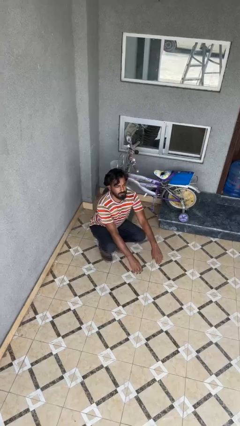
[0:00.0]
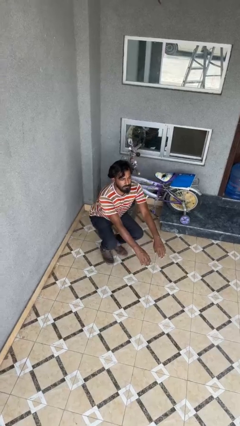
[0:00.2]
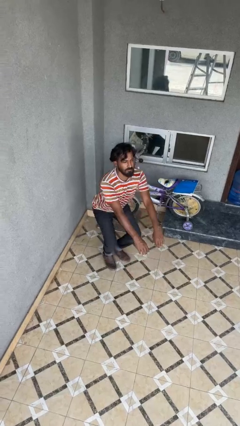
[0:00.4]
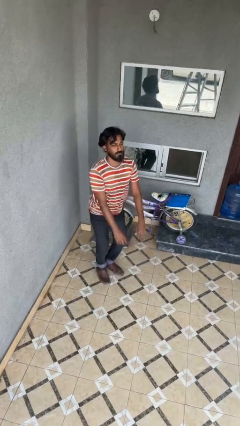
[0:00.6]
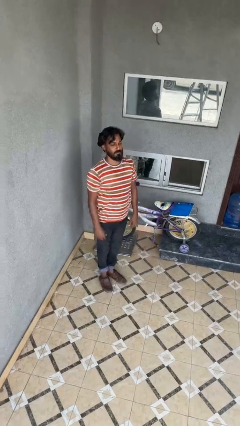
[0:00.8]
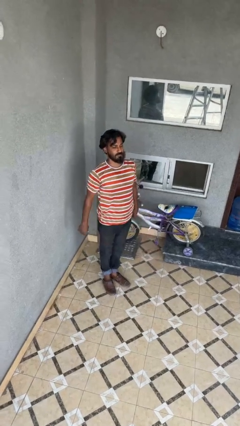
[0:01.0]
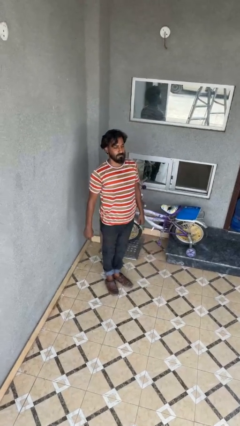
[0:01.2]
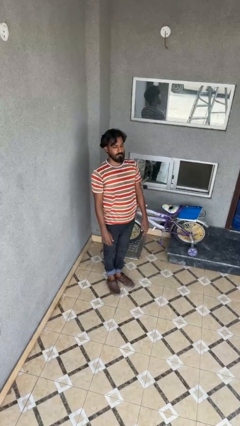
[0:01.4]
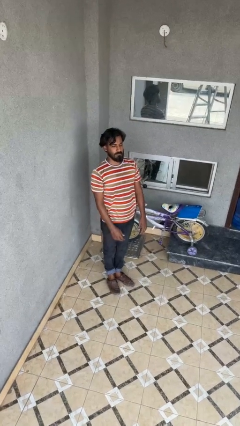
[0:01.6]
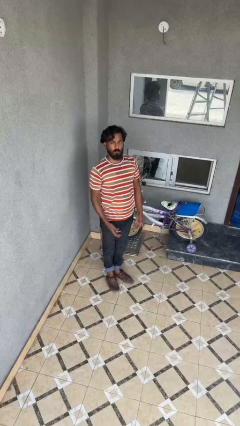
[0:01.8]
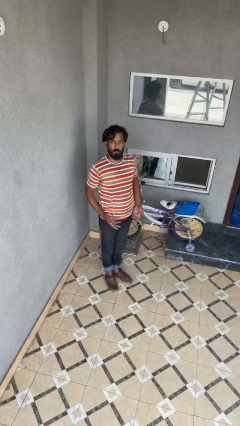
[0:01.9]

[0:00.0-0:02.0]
person stands up

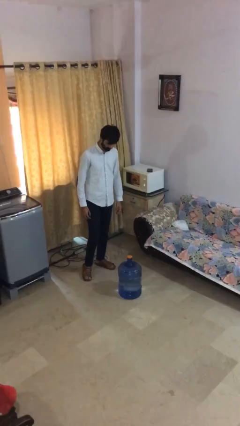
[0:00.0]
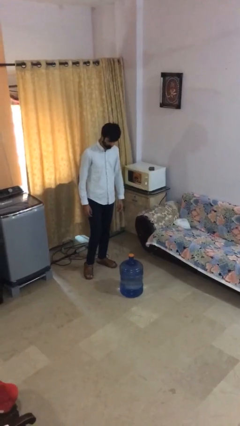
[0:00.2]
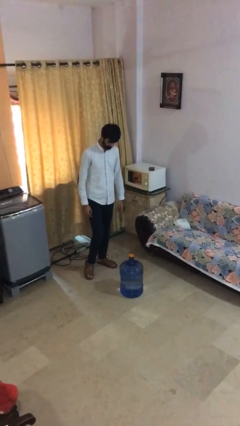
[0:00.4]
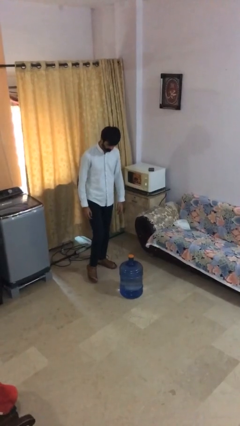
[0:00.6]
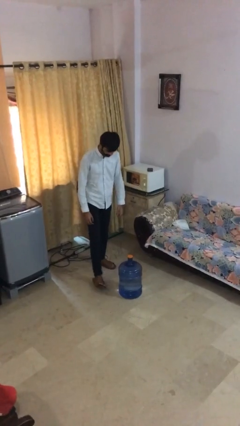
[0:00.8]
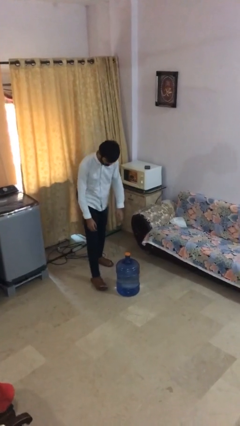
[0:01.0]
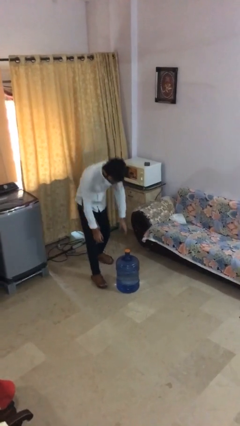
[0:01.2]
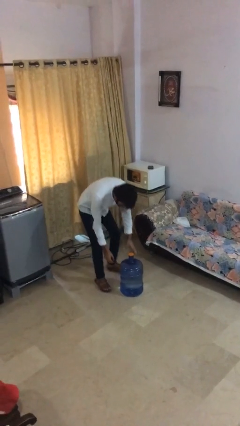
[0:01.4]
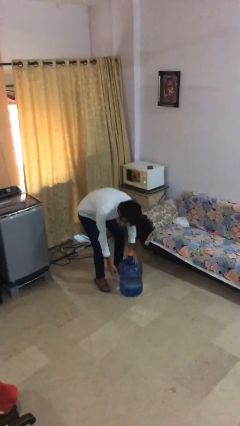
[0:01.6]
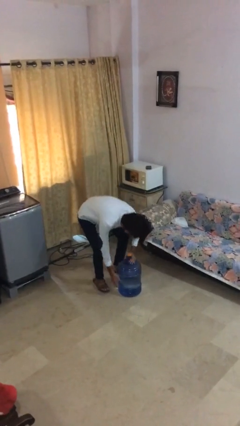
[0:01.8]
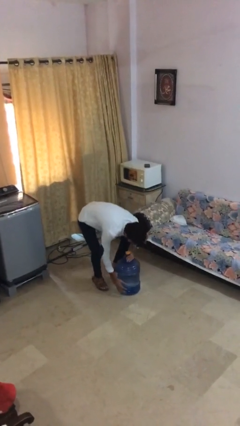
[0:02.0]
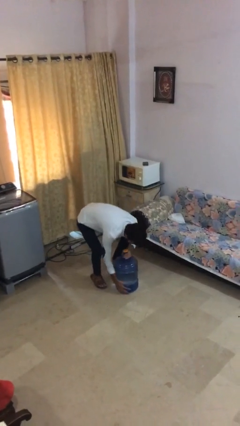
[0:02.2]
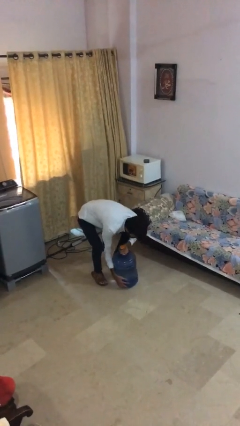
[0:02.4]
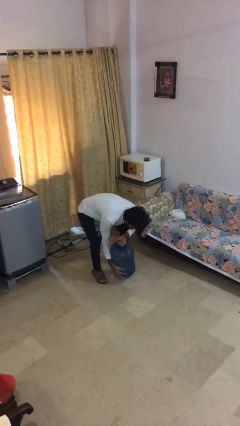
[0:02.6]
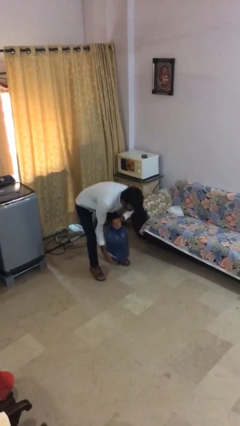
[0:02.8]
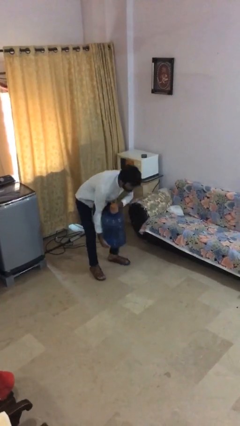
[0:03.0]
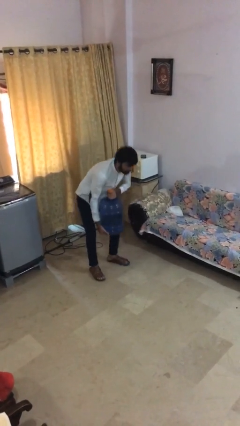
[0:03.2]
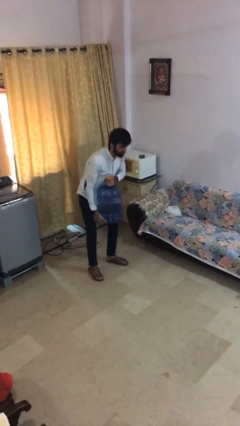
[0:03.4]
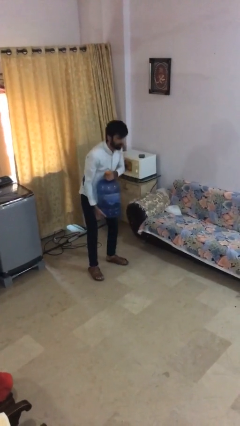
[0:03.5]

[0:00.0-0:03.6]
person picks up object from floor

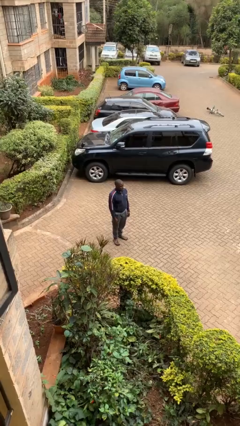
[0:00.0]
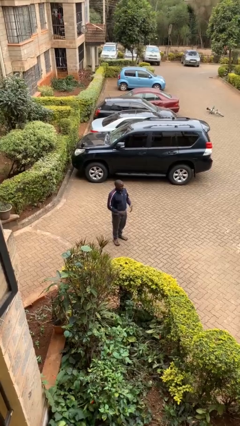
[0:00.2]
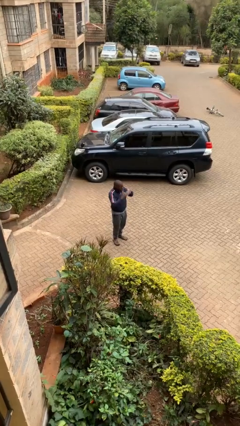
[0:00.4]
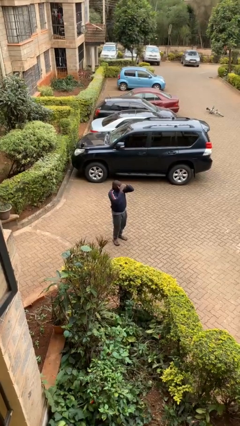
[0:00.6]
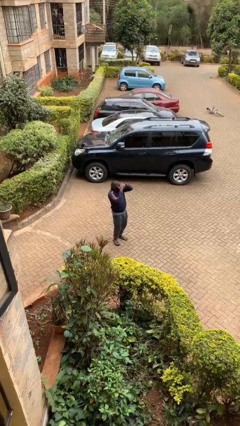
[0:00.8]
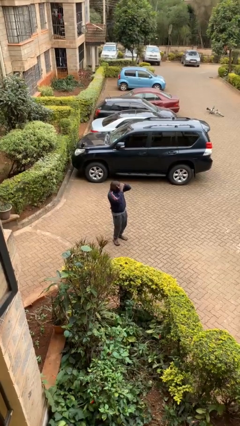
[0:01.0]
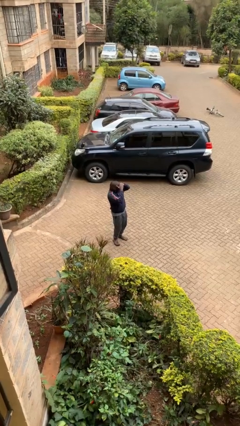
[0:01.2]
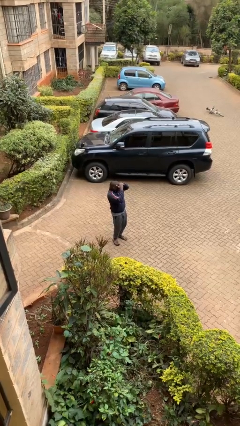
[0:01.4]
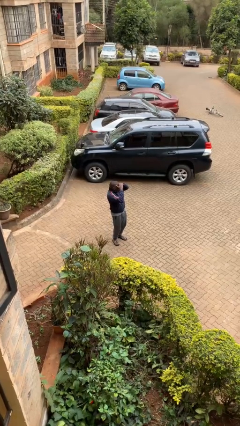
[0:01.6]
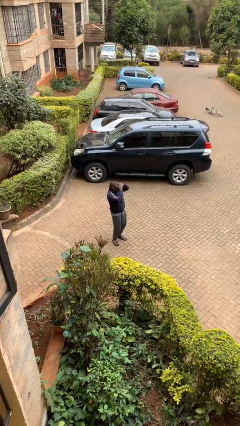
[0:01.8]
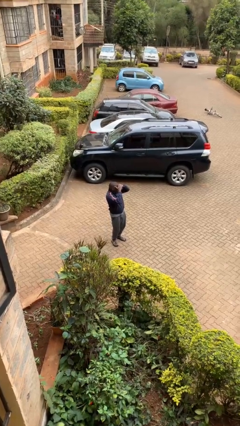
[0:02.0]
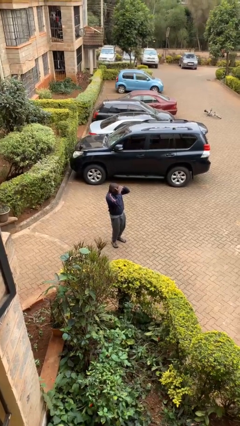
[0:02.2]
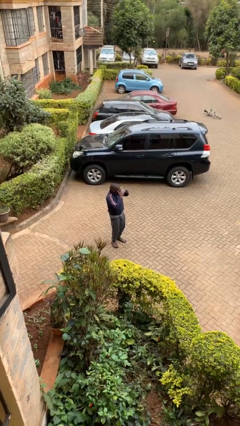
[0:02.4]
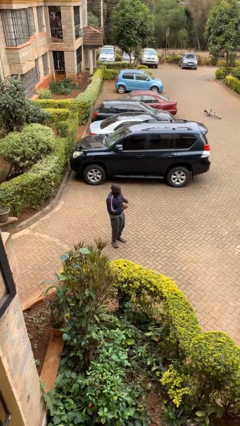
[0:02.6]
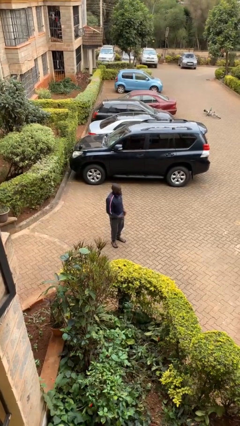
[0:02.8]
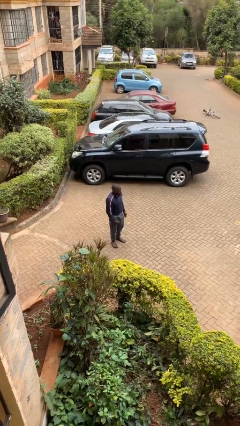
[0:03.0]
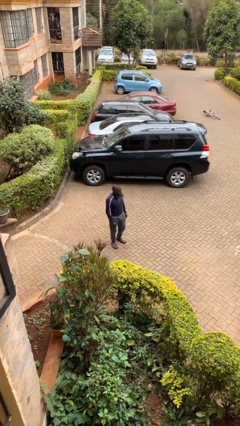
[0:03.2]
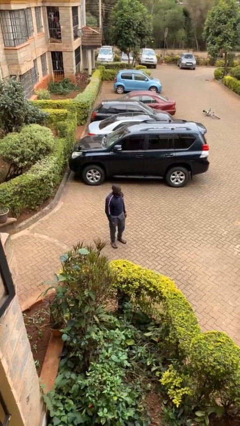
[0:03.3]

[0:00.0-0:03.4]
person shades eyes

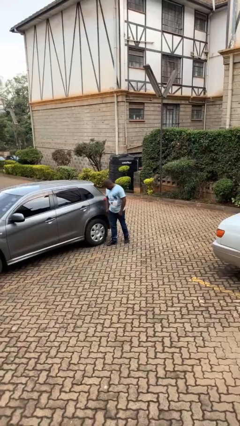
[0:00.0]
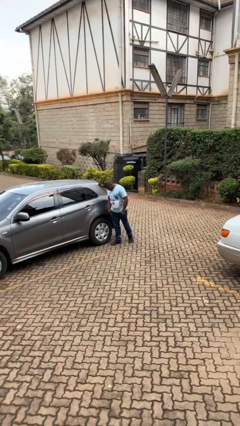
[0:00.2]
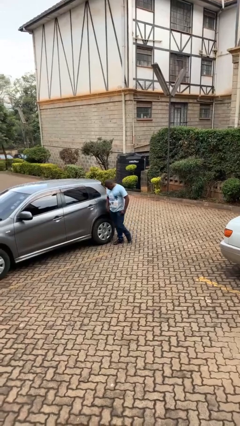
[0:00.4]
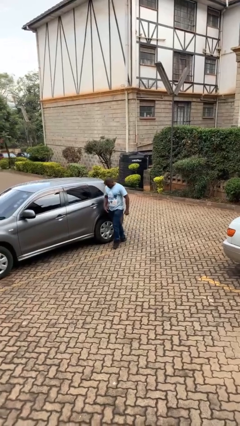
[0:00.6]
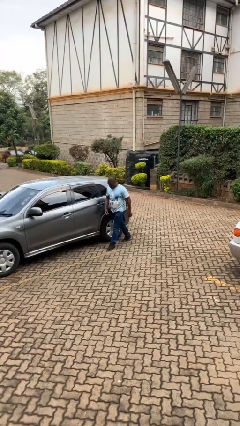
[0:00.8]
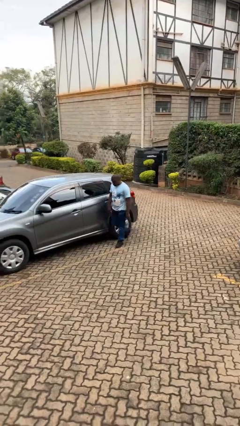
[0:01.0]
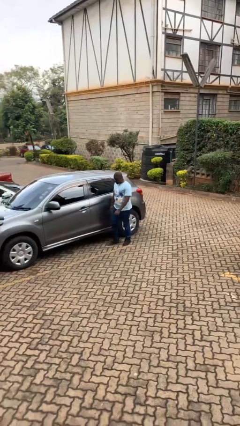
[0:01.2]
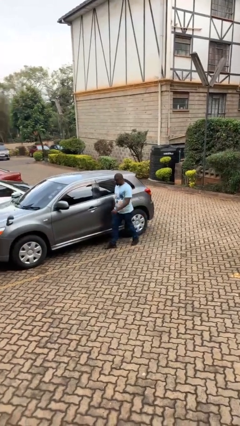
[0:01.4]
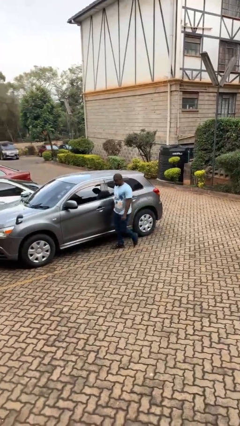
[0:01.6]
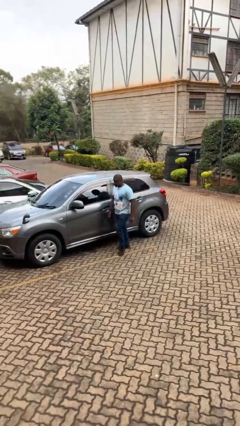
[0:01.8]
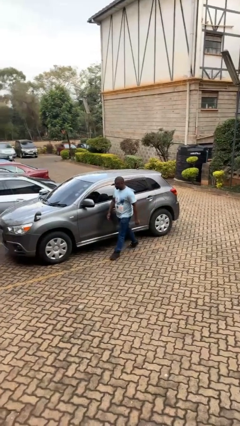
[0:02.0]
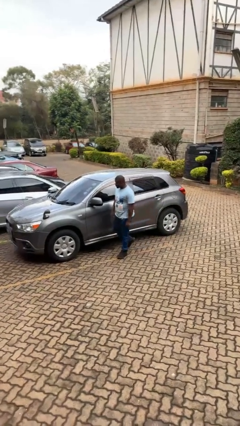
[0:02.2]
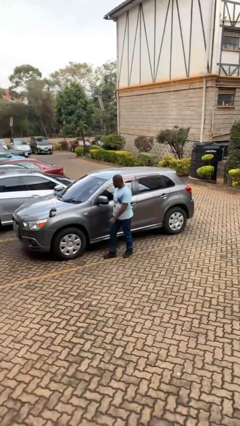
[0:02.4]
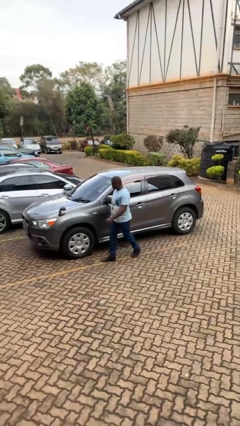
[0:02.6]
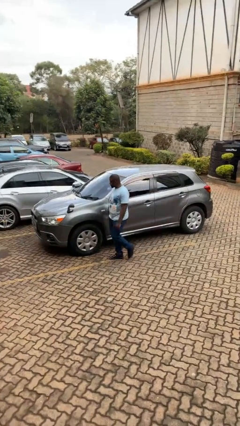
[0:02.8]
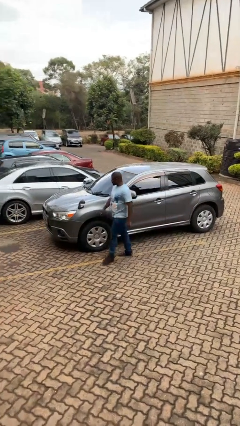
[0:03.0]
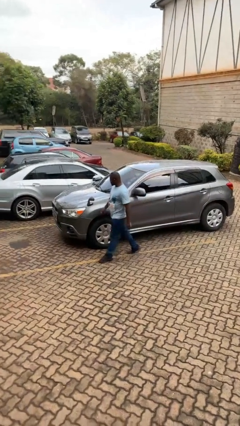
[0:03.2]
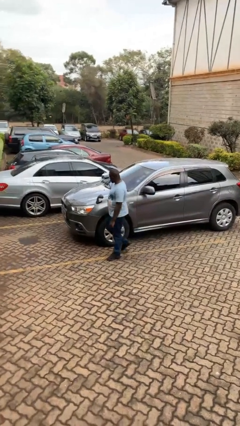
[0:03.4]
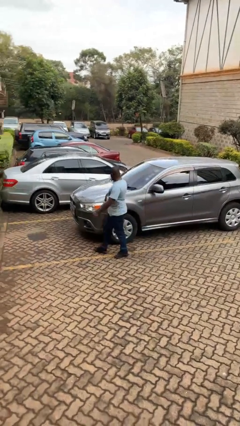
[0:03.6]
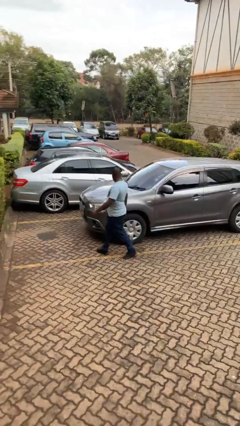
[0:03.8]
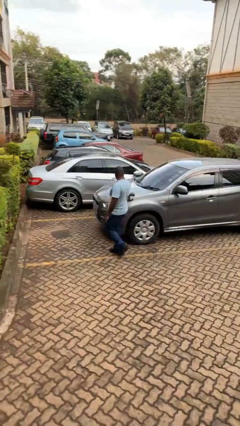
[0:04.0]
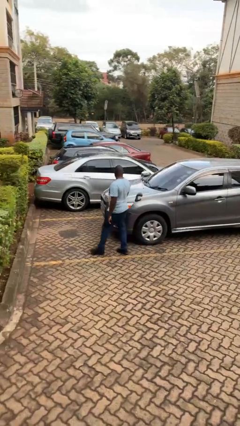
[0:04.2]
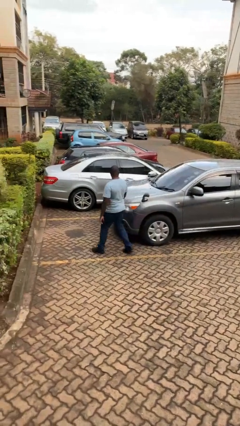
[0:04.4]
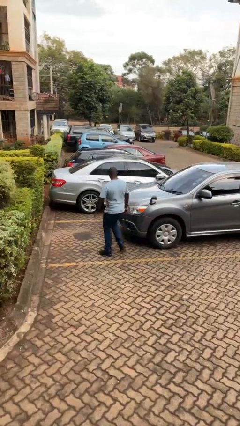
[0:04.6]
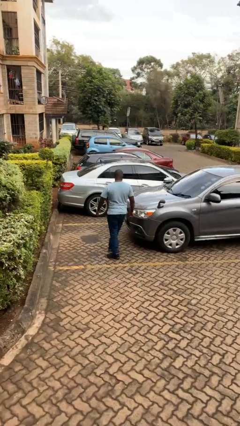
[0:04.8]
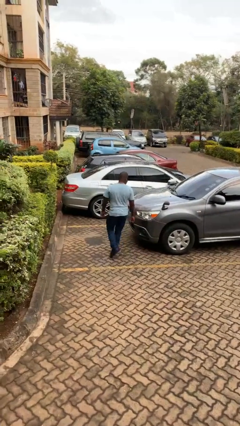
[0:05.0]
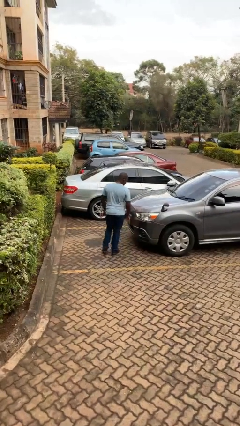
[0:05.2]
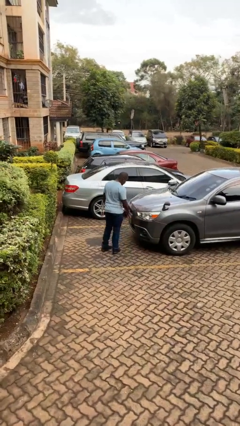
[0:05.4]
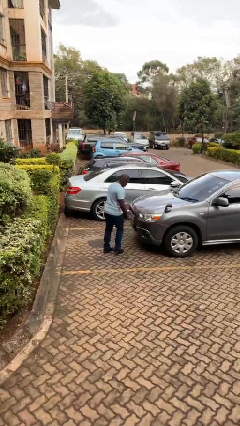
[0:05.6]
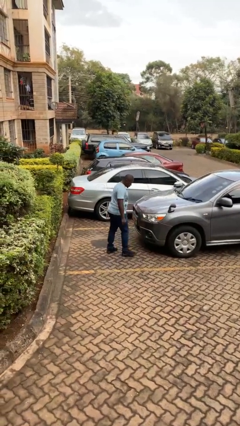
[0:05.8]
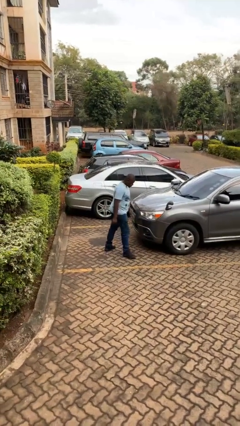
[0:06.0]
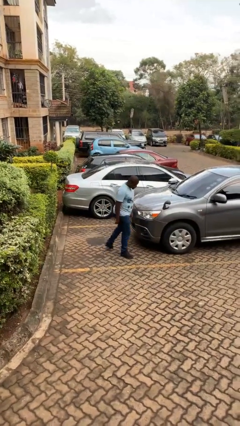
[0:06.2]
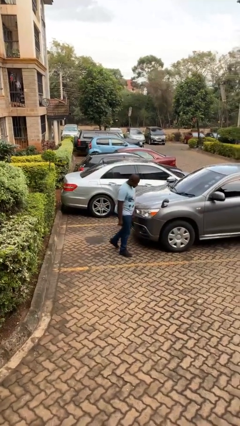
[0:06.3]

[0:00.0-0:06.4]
person walks around car

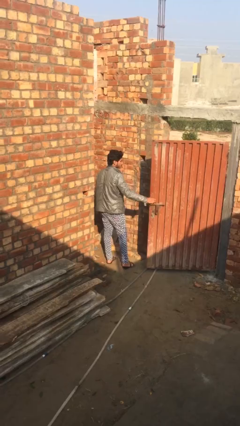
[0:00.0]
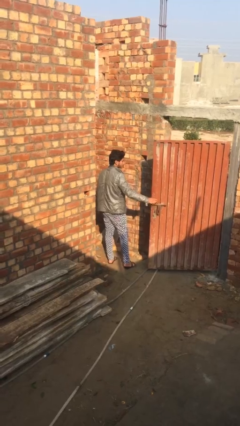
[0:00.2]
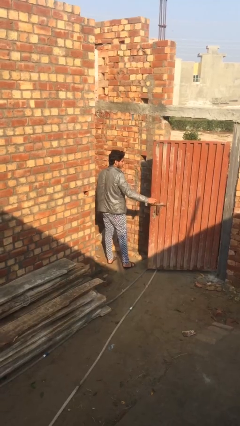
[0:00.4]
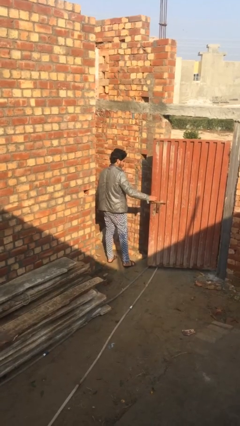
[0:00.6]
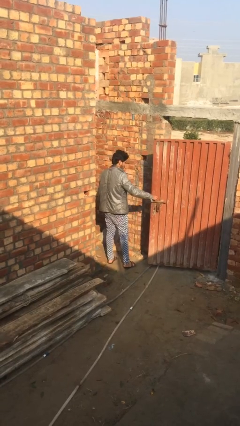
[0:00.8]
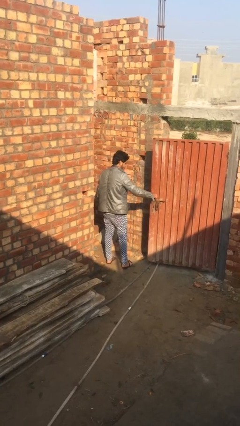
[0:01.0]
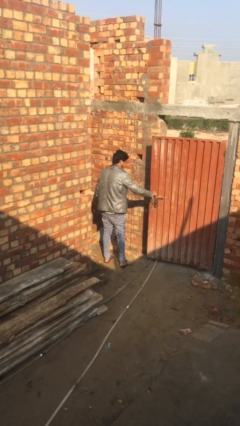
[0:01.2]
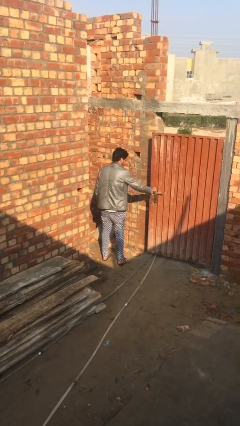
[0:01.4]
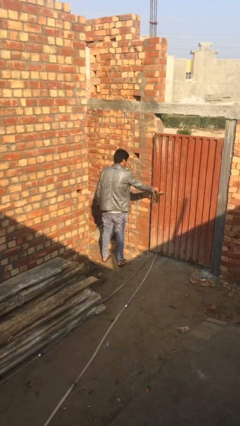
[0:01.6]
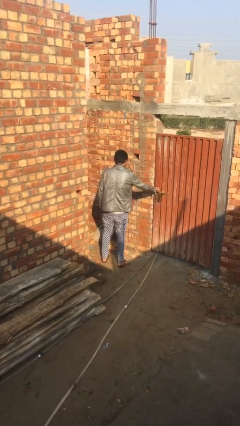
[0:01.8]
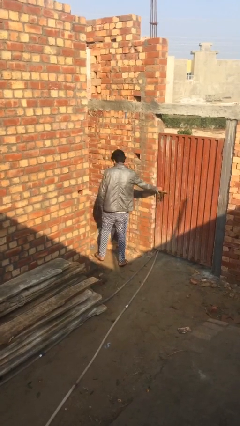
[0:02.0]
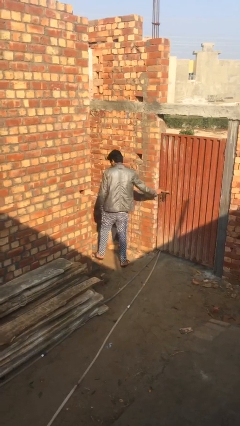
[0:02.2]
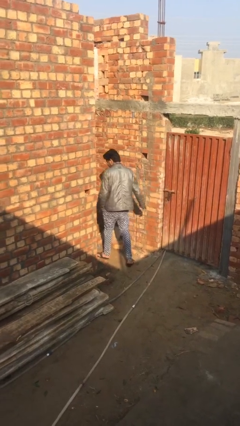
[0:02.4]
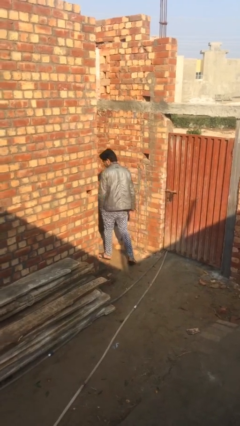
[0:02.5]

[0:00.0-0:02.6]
person closes facility door
